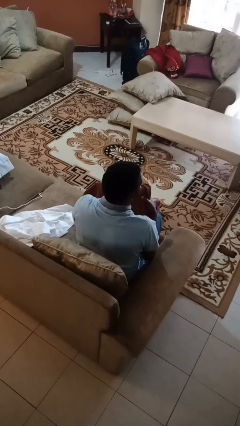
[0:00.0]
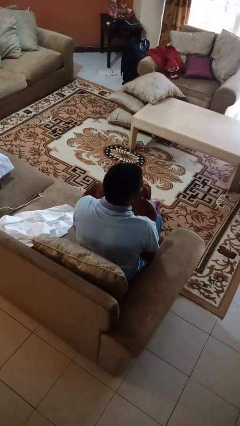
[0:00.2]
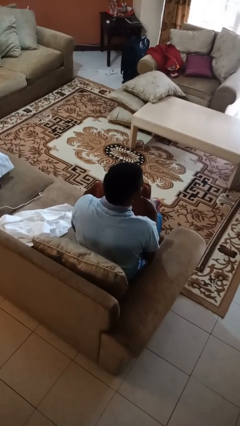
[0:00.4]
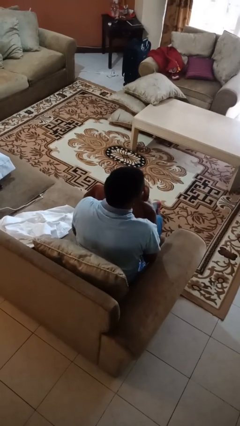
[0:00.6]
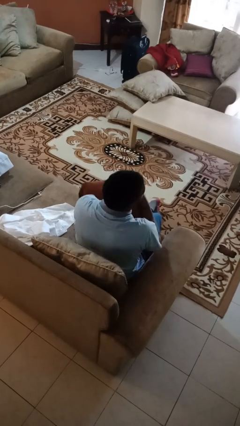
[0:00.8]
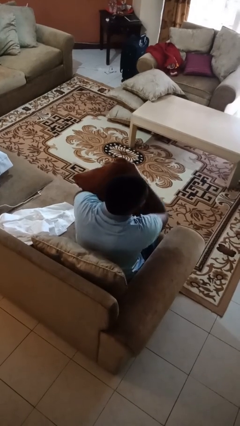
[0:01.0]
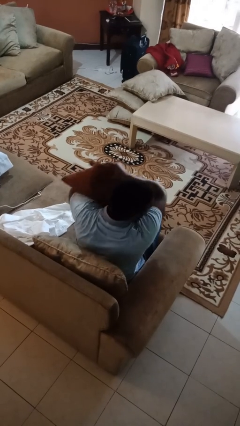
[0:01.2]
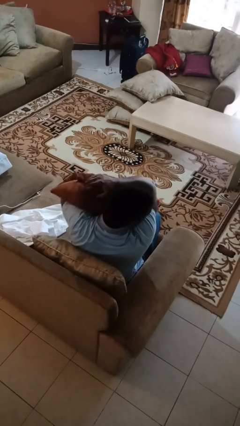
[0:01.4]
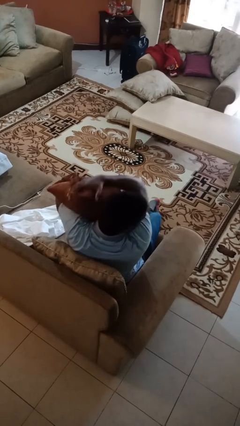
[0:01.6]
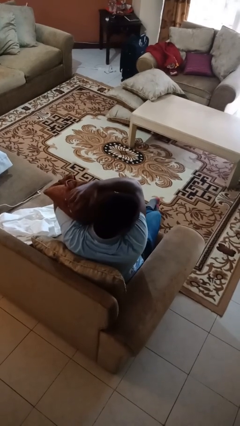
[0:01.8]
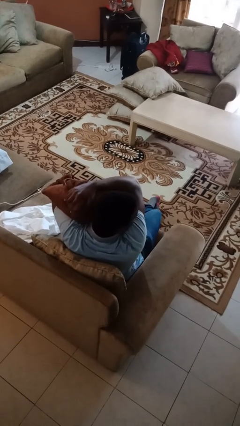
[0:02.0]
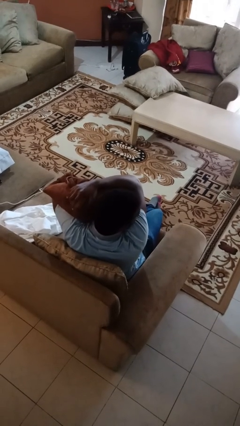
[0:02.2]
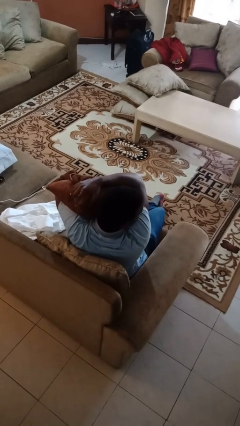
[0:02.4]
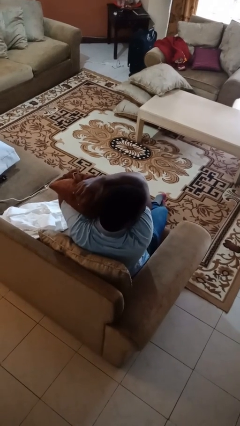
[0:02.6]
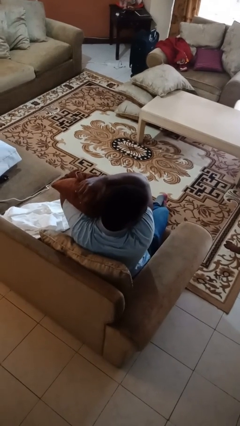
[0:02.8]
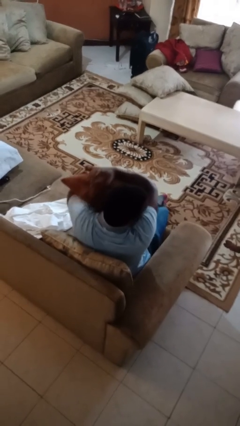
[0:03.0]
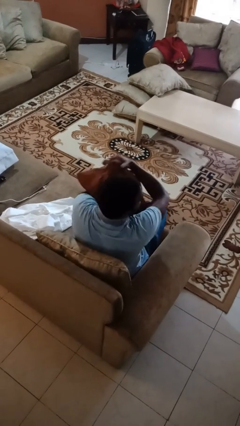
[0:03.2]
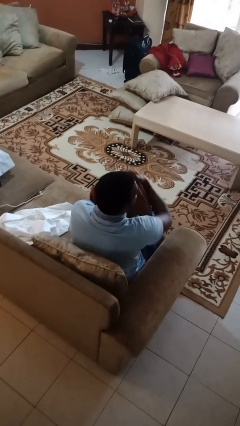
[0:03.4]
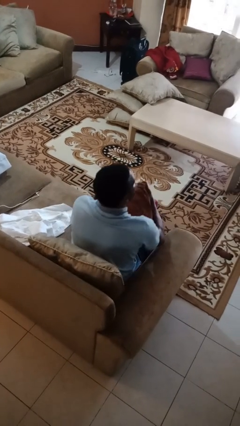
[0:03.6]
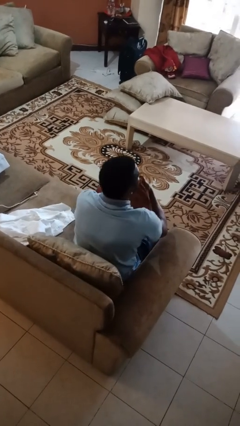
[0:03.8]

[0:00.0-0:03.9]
person hugs stuffed animal

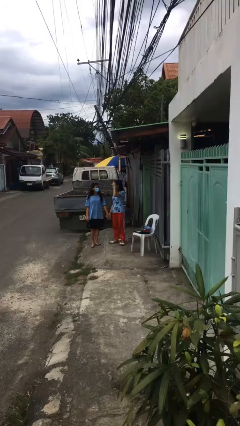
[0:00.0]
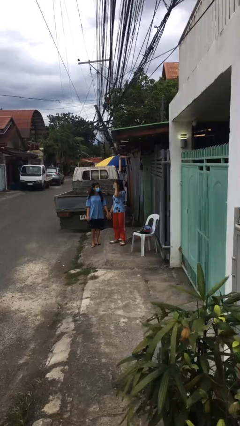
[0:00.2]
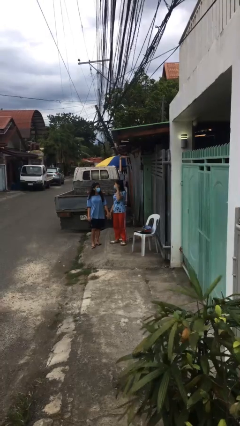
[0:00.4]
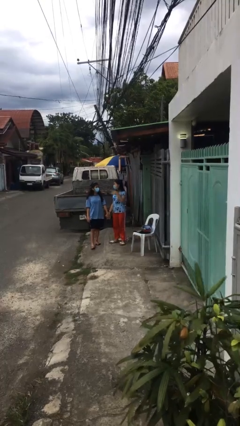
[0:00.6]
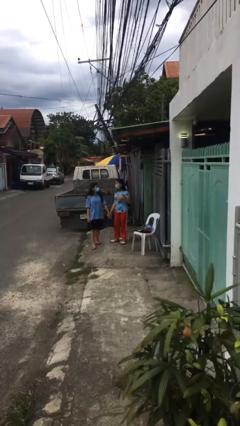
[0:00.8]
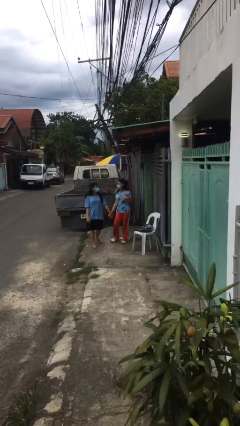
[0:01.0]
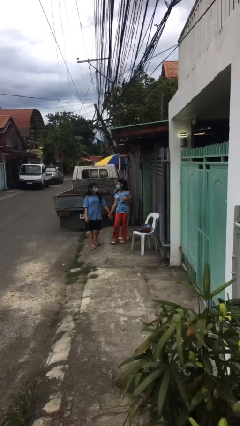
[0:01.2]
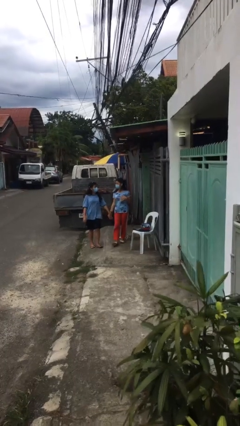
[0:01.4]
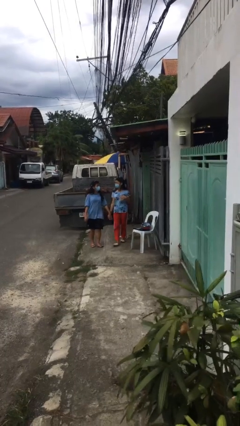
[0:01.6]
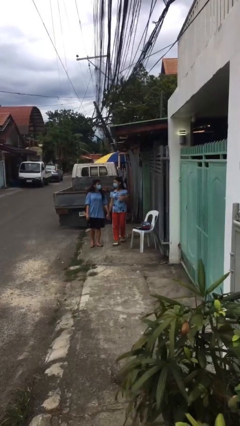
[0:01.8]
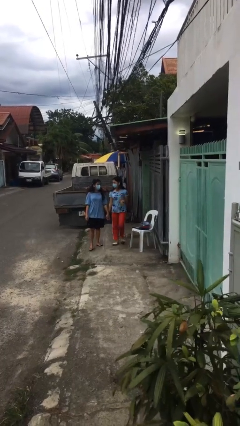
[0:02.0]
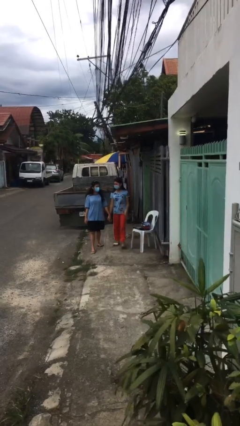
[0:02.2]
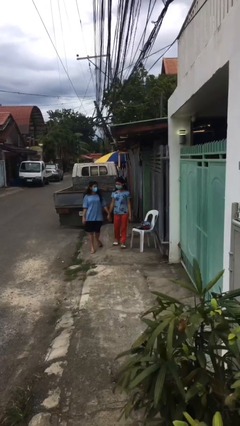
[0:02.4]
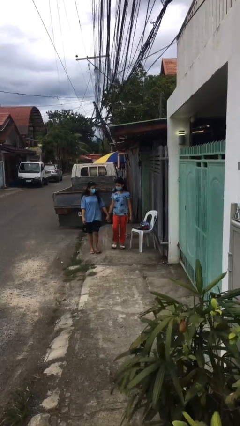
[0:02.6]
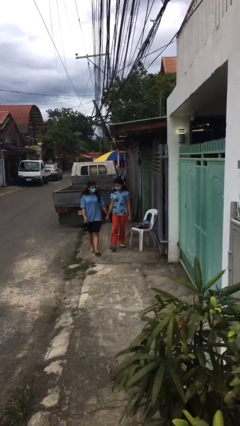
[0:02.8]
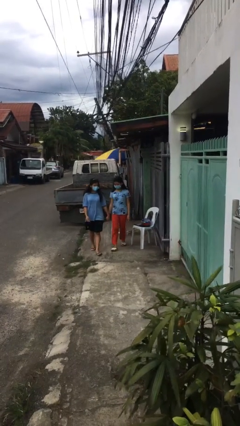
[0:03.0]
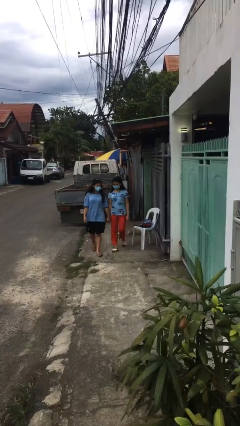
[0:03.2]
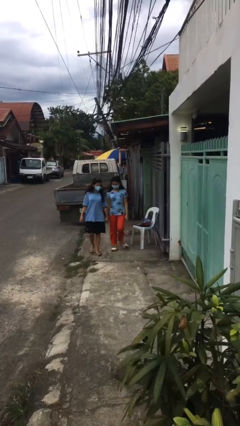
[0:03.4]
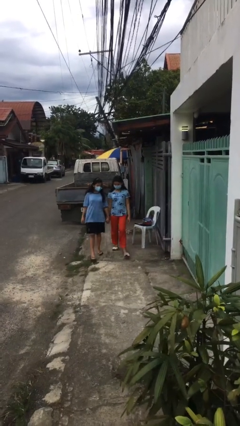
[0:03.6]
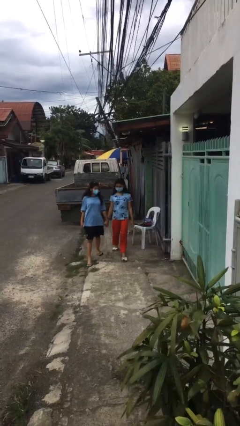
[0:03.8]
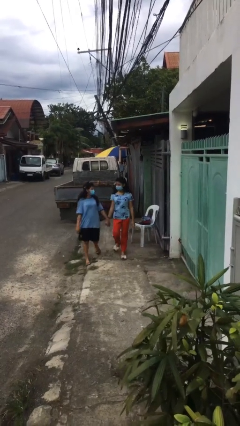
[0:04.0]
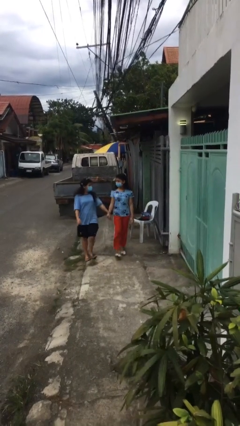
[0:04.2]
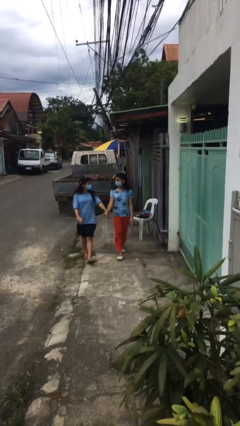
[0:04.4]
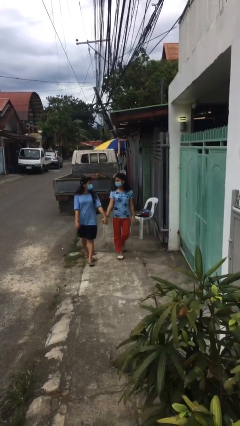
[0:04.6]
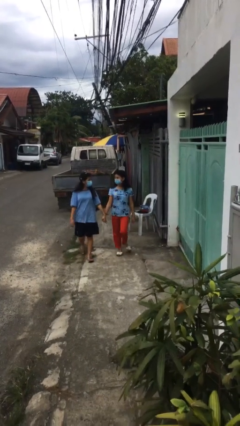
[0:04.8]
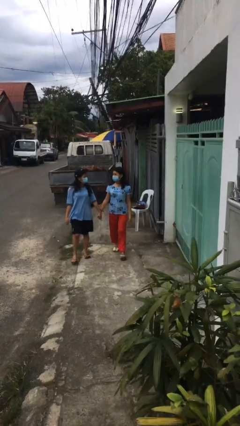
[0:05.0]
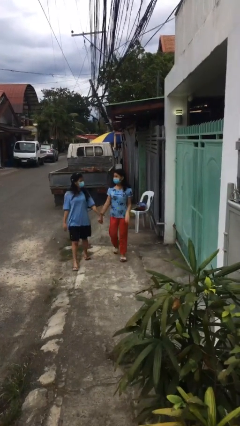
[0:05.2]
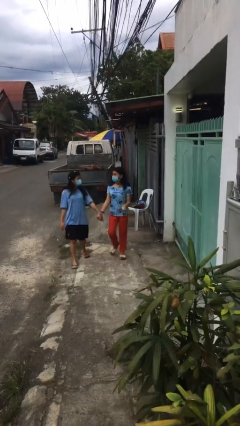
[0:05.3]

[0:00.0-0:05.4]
person holds hand

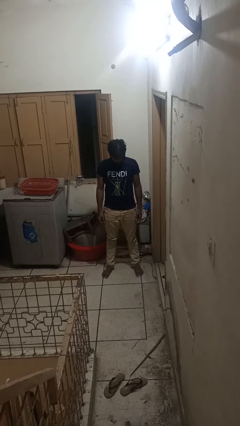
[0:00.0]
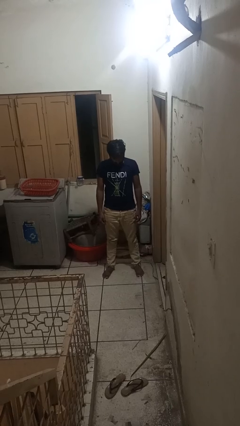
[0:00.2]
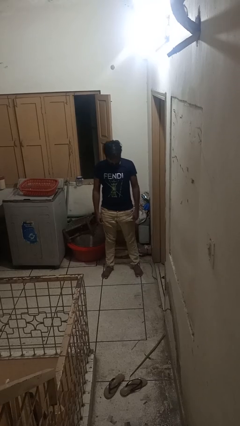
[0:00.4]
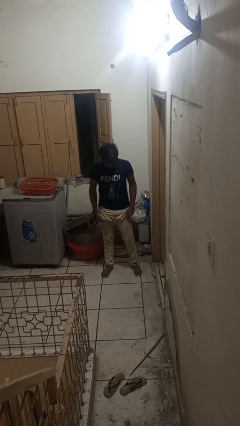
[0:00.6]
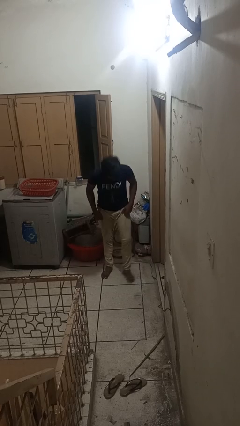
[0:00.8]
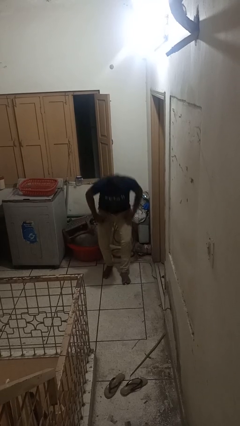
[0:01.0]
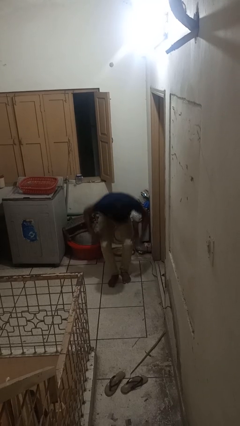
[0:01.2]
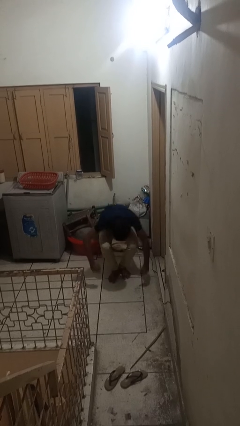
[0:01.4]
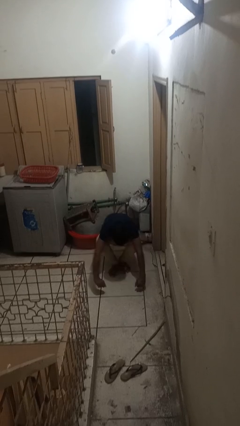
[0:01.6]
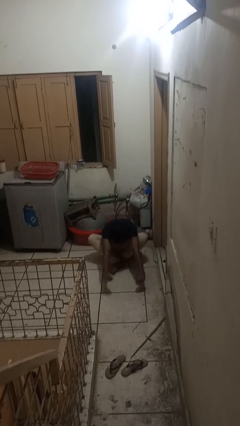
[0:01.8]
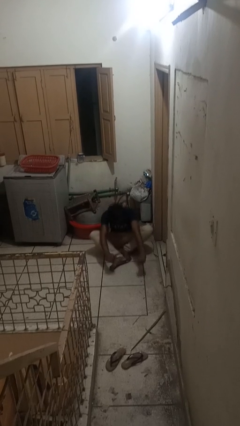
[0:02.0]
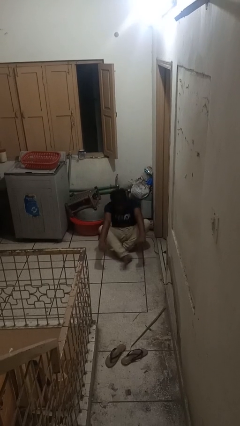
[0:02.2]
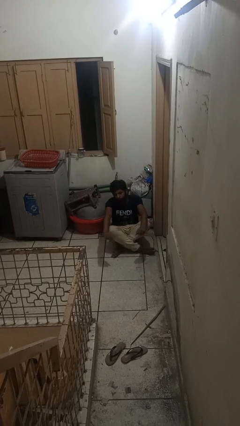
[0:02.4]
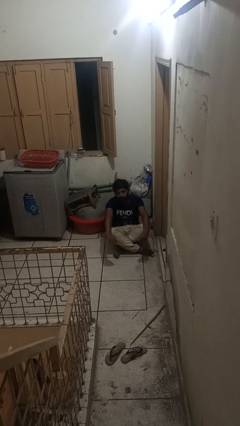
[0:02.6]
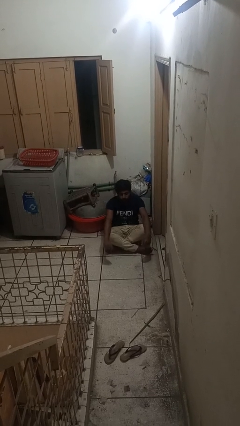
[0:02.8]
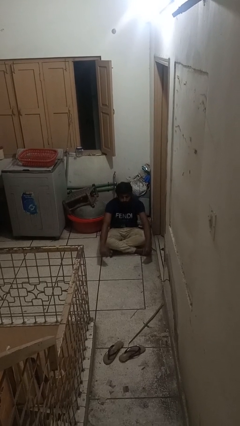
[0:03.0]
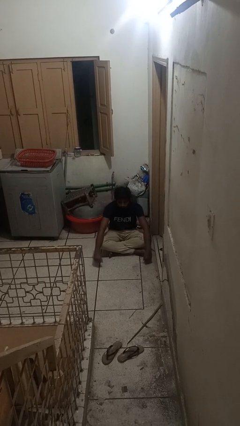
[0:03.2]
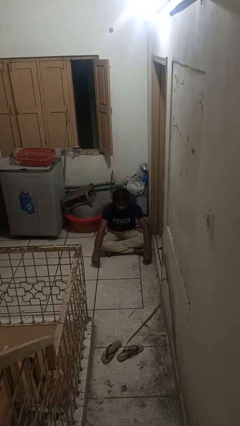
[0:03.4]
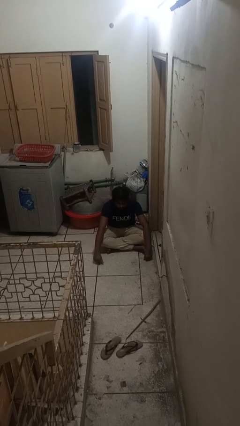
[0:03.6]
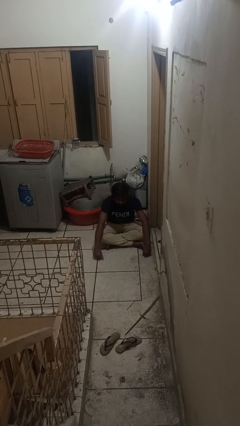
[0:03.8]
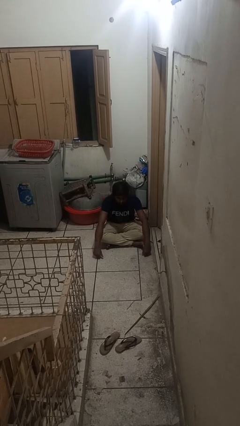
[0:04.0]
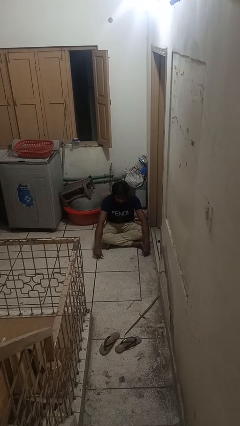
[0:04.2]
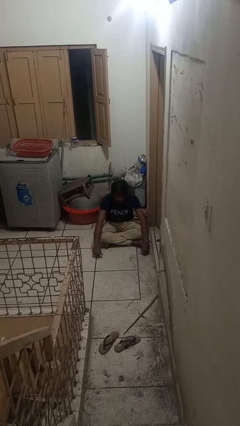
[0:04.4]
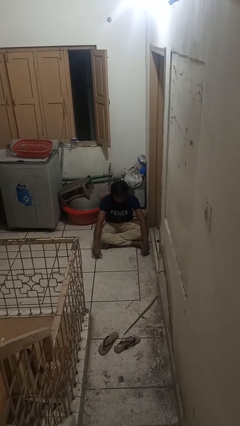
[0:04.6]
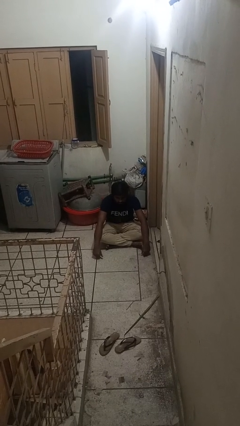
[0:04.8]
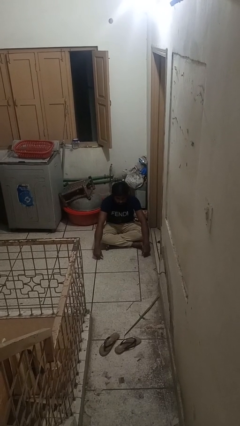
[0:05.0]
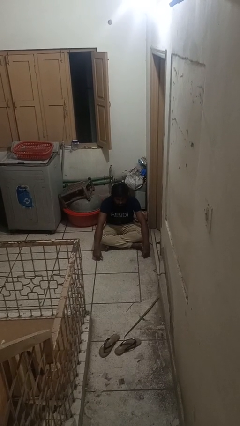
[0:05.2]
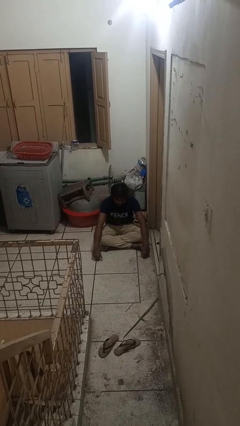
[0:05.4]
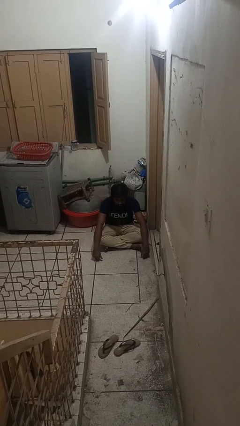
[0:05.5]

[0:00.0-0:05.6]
person sits crisscross

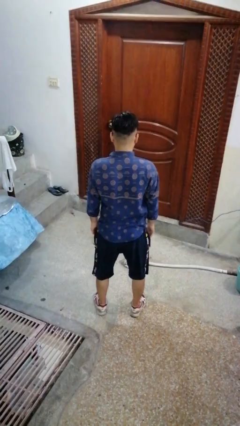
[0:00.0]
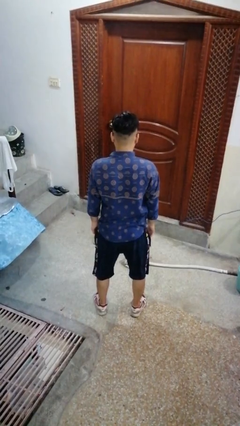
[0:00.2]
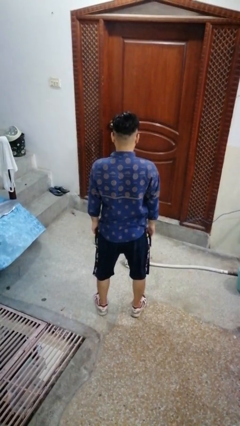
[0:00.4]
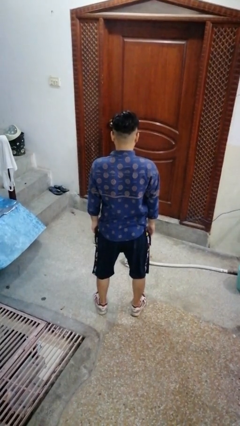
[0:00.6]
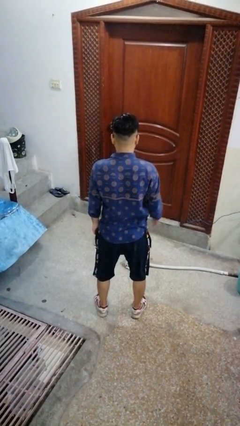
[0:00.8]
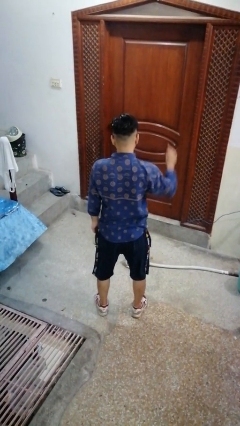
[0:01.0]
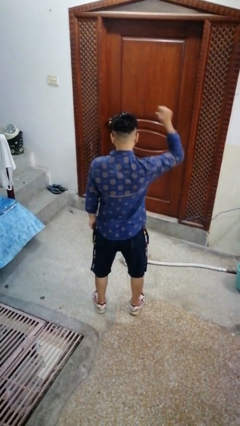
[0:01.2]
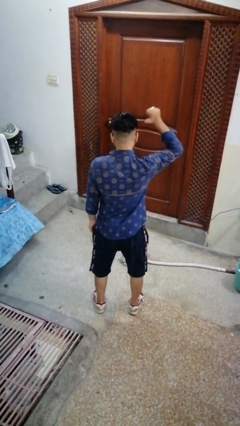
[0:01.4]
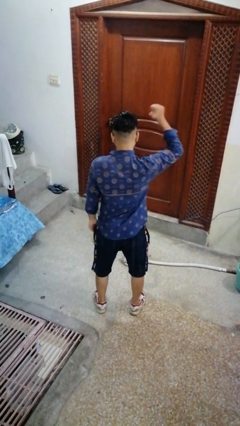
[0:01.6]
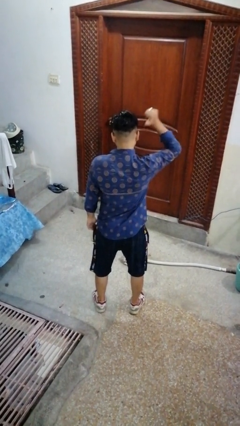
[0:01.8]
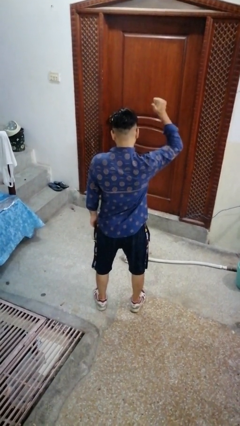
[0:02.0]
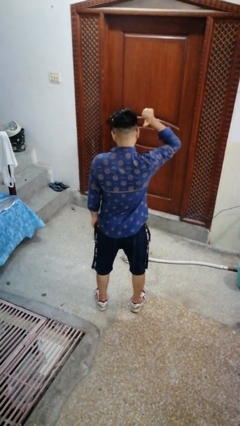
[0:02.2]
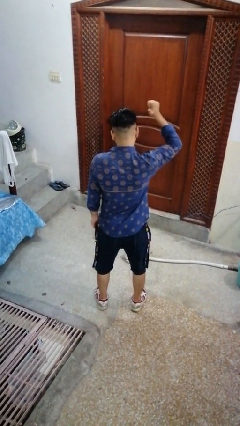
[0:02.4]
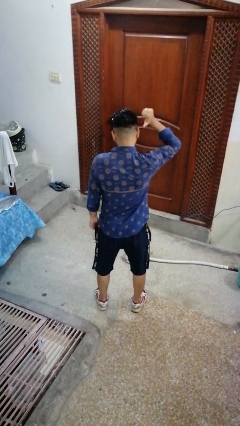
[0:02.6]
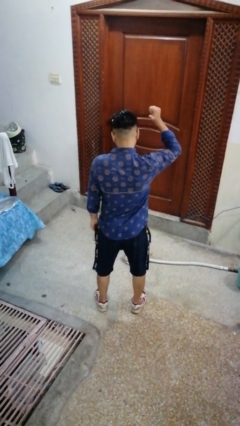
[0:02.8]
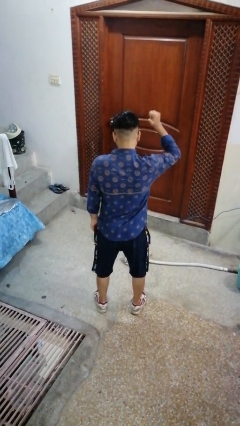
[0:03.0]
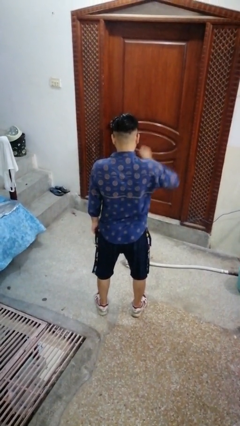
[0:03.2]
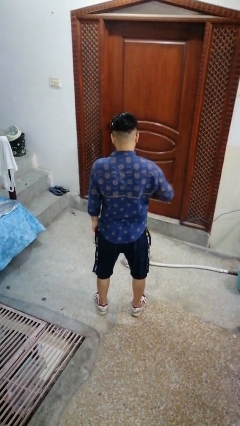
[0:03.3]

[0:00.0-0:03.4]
person gestures behind me
